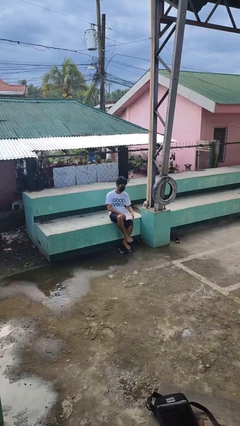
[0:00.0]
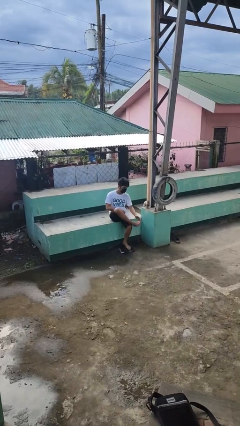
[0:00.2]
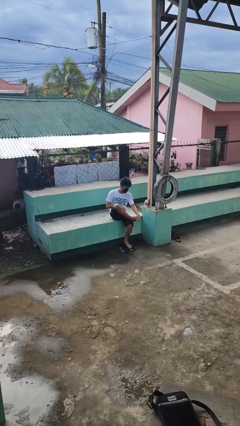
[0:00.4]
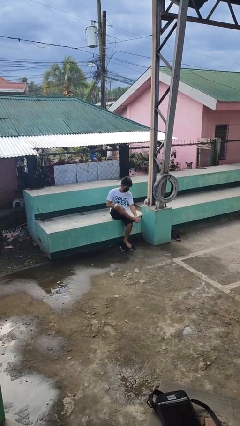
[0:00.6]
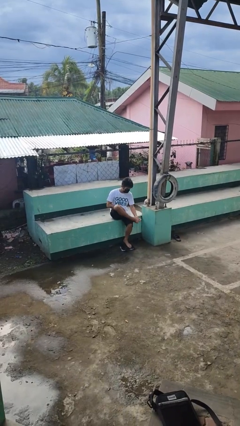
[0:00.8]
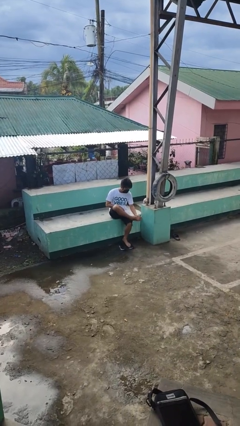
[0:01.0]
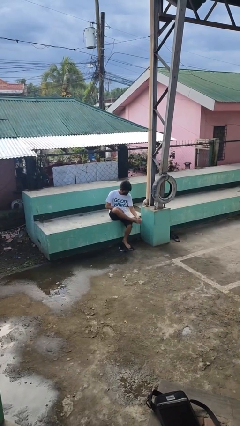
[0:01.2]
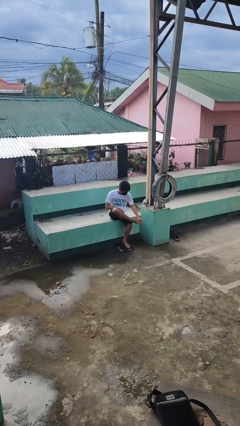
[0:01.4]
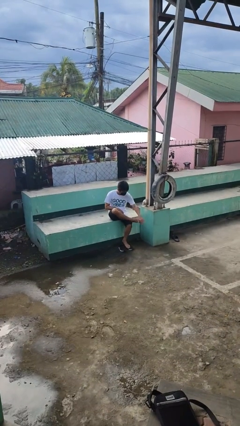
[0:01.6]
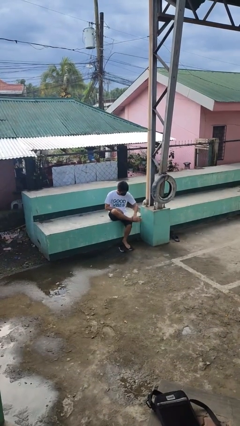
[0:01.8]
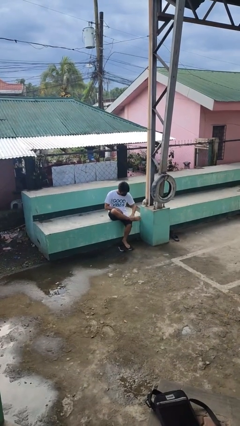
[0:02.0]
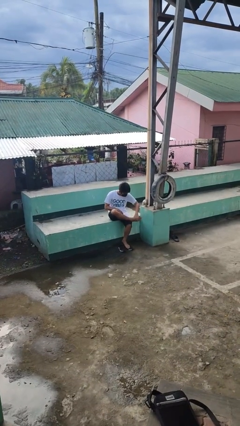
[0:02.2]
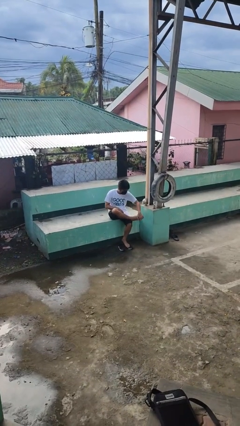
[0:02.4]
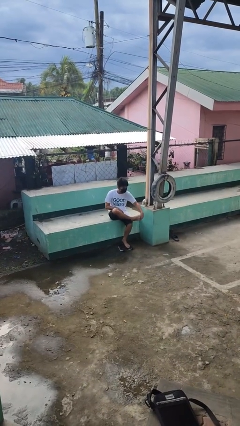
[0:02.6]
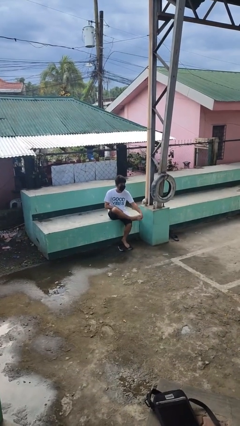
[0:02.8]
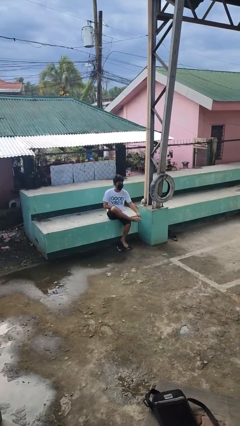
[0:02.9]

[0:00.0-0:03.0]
person rubs foot

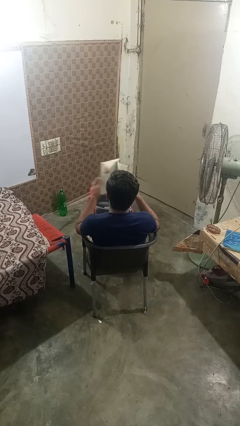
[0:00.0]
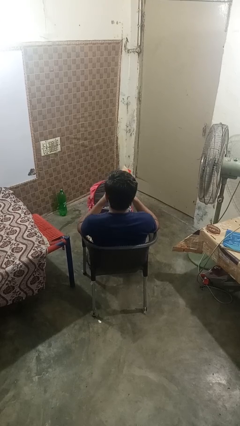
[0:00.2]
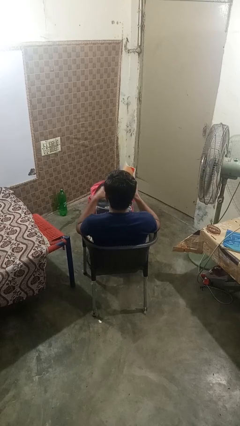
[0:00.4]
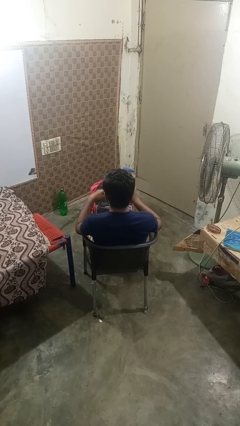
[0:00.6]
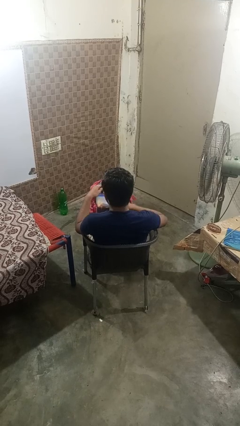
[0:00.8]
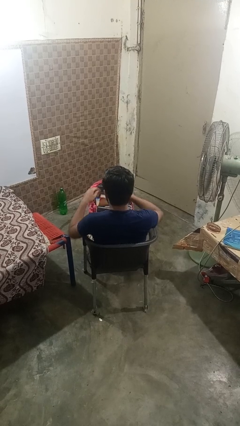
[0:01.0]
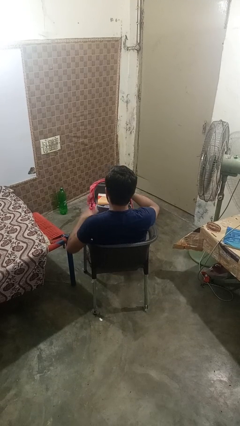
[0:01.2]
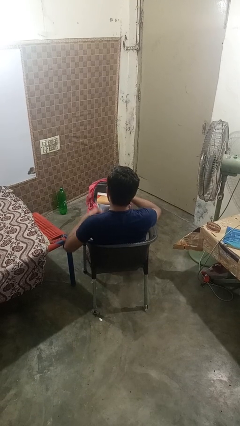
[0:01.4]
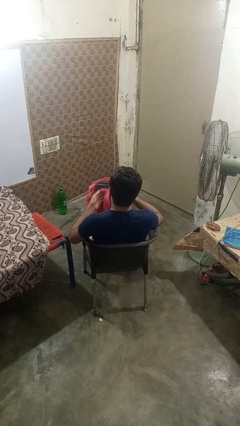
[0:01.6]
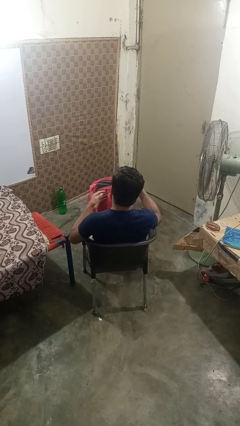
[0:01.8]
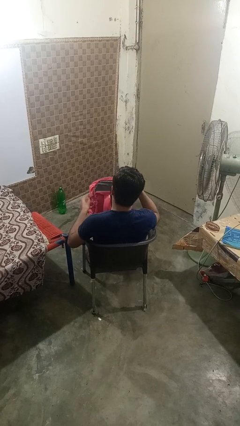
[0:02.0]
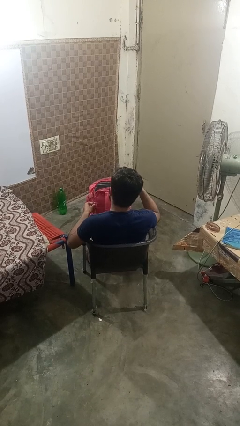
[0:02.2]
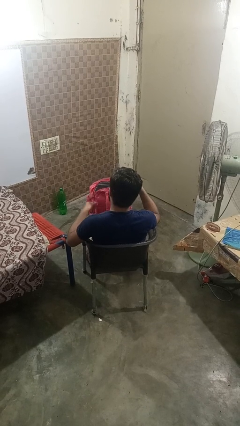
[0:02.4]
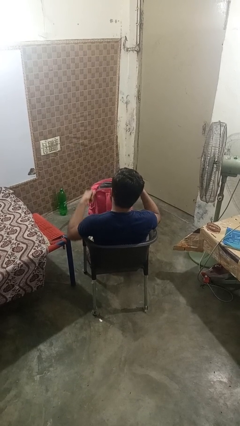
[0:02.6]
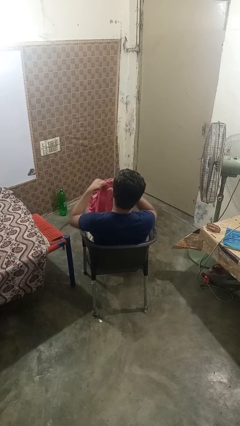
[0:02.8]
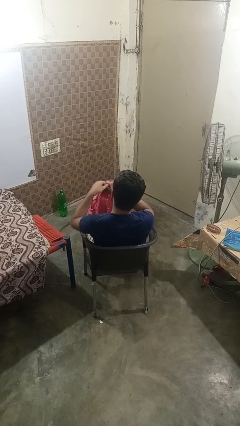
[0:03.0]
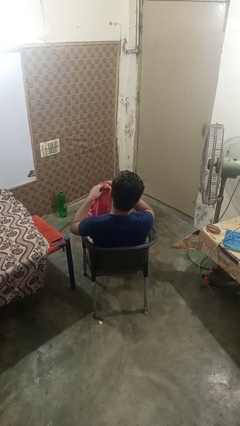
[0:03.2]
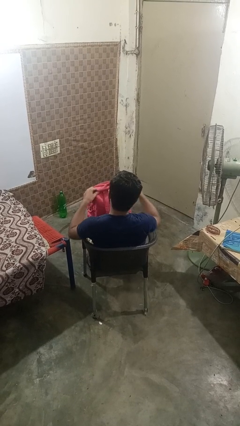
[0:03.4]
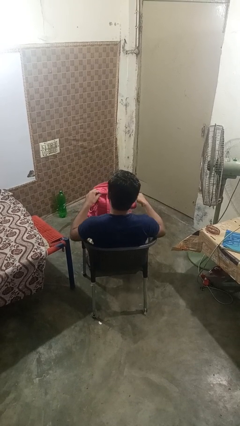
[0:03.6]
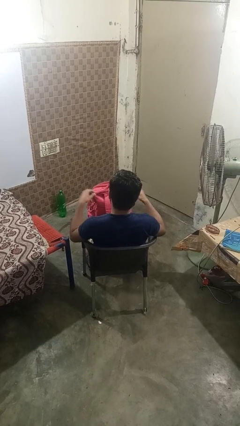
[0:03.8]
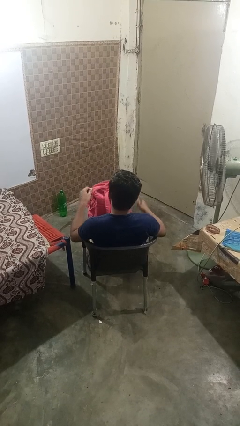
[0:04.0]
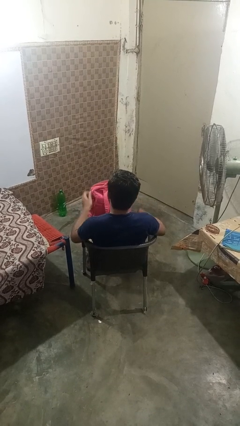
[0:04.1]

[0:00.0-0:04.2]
person puts object into backpack

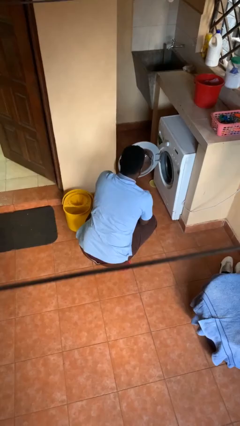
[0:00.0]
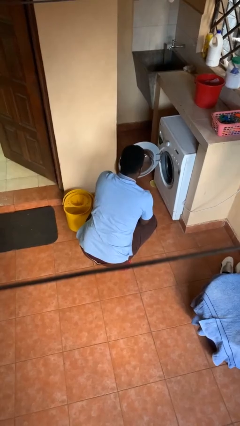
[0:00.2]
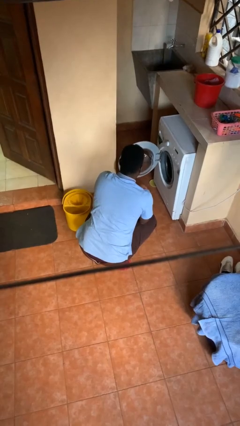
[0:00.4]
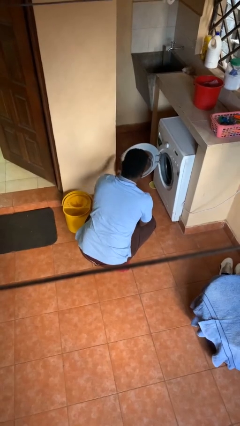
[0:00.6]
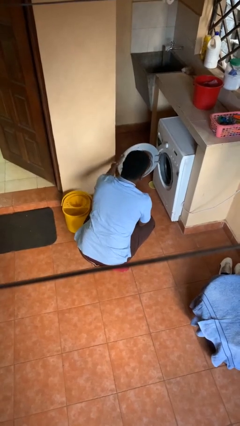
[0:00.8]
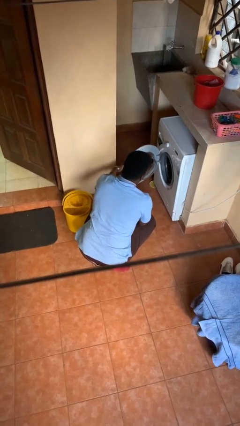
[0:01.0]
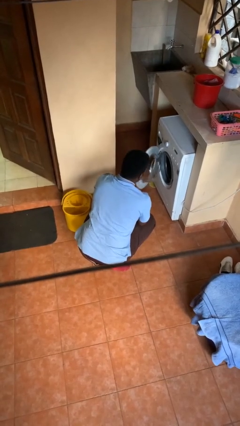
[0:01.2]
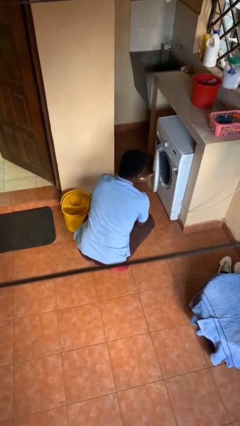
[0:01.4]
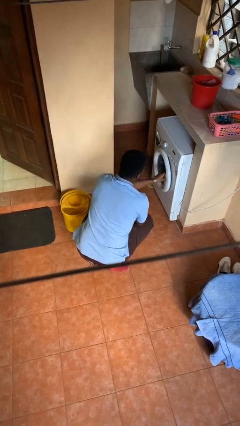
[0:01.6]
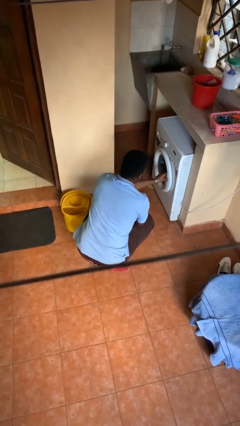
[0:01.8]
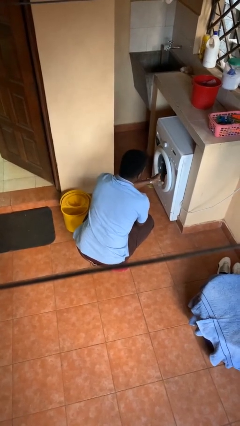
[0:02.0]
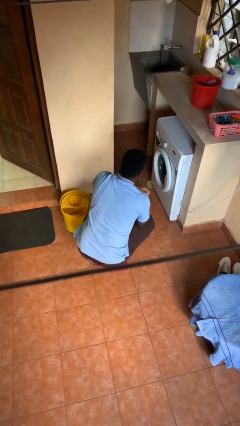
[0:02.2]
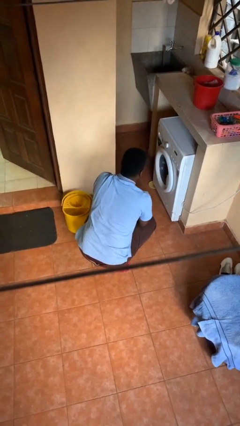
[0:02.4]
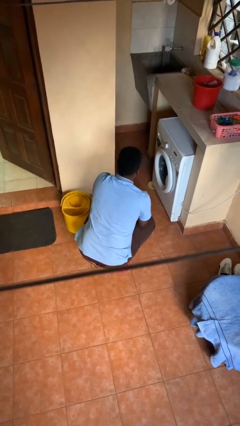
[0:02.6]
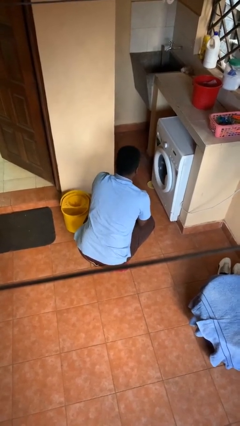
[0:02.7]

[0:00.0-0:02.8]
person closes clothes washer

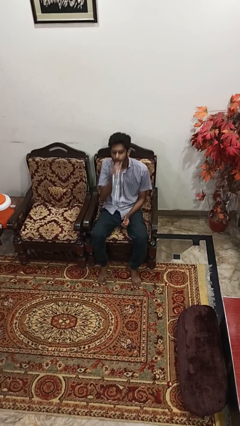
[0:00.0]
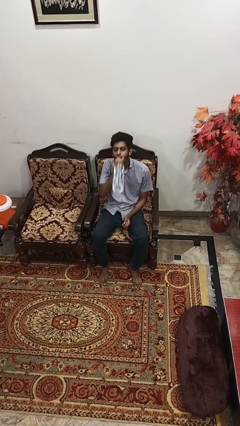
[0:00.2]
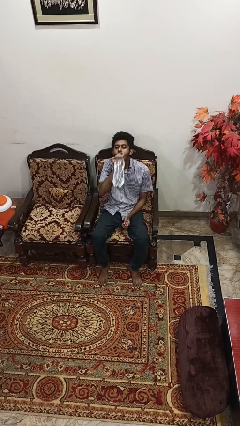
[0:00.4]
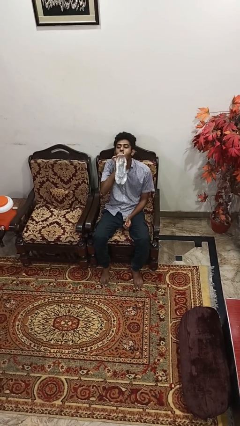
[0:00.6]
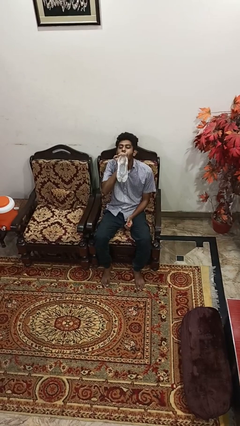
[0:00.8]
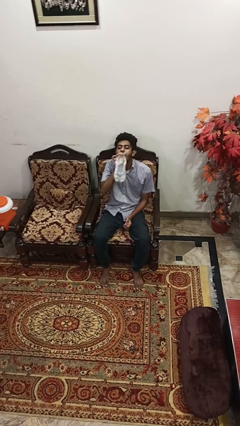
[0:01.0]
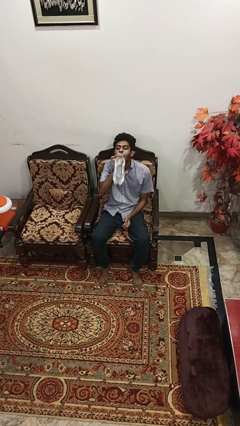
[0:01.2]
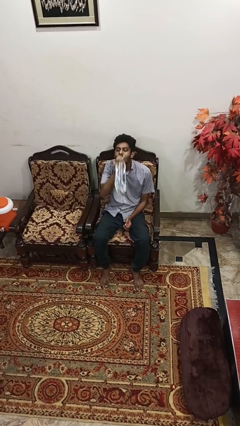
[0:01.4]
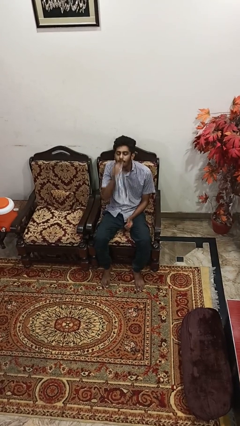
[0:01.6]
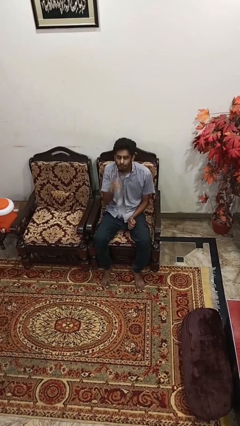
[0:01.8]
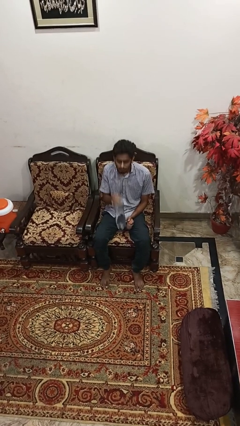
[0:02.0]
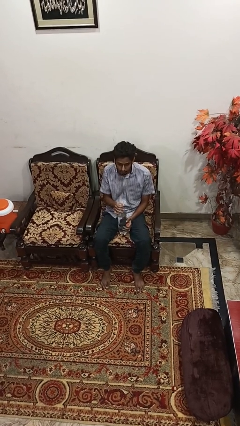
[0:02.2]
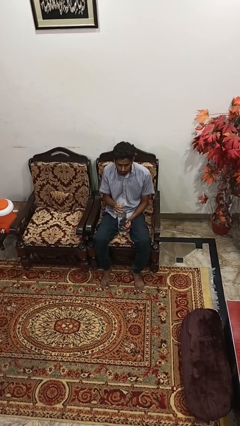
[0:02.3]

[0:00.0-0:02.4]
person drinks from bottle

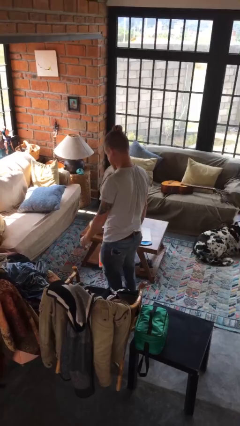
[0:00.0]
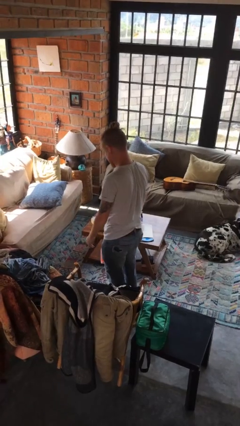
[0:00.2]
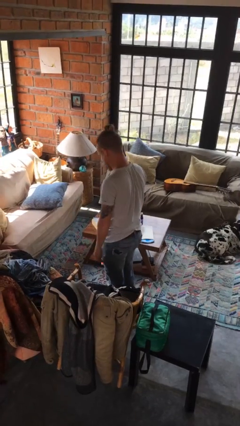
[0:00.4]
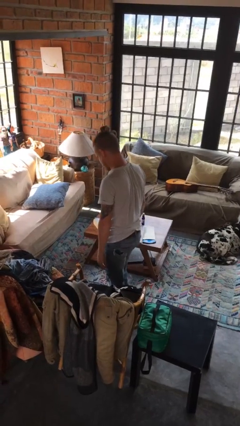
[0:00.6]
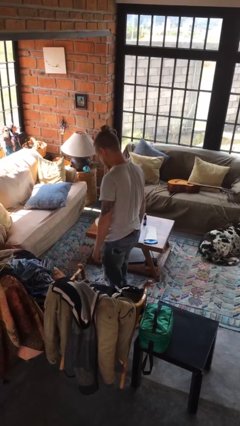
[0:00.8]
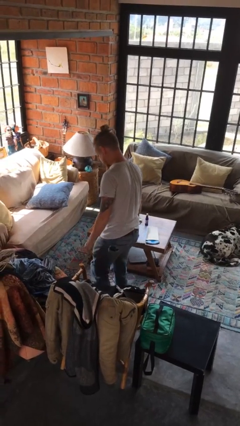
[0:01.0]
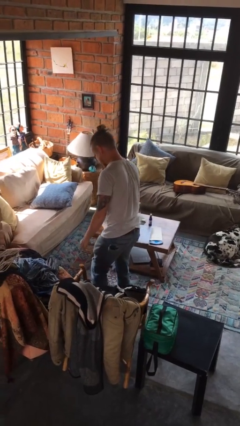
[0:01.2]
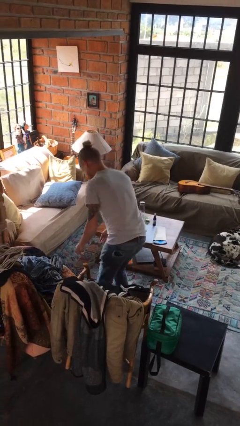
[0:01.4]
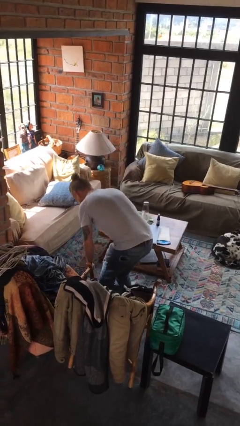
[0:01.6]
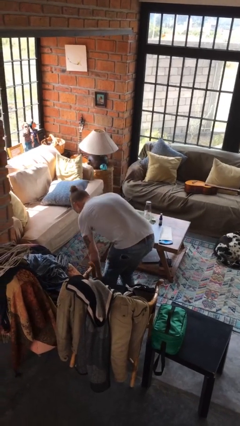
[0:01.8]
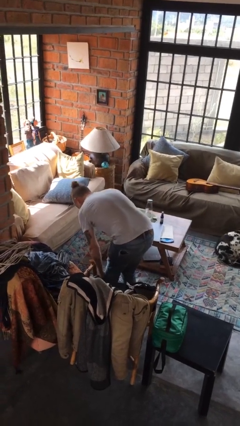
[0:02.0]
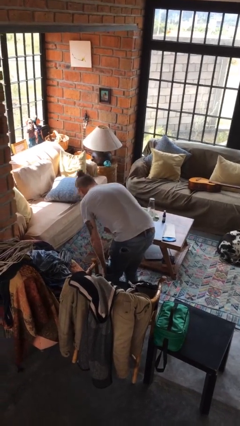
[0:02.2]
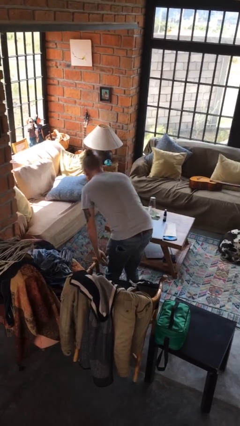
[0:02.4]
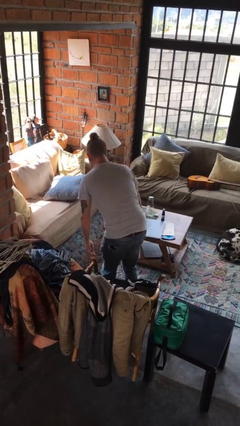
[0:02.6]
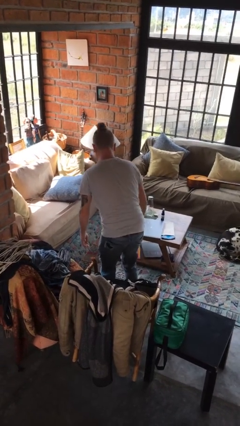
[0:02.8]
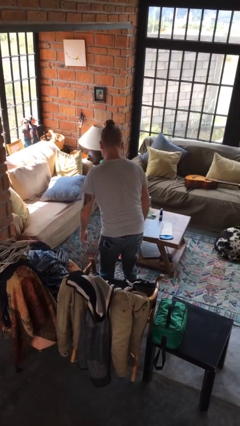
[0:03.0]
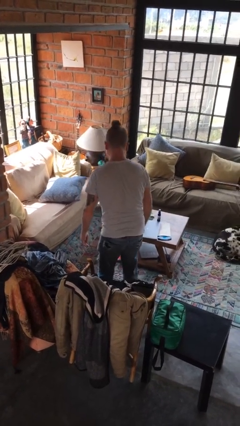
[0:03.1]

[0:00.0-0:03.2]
person stubs toe

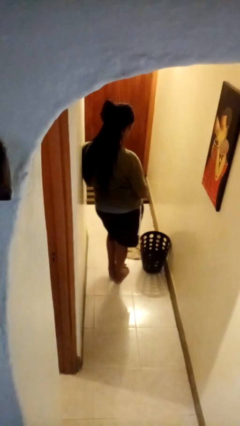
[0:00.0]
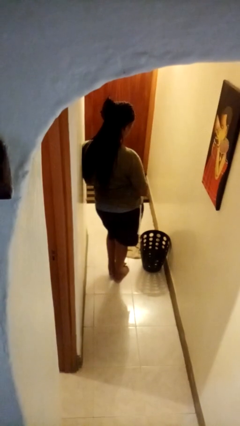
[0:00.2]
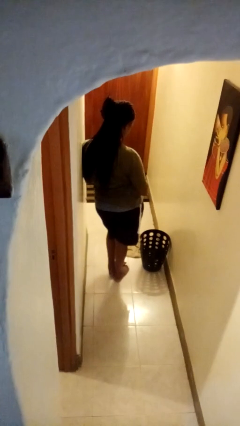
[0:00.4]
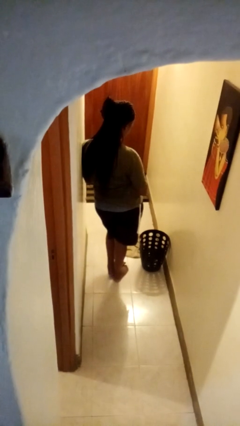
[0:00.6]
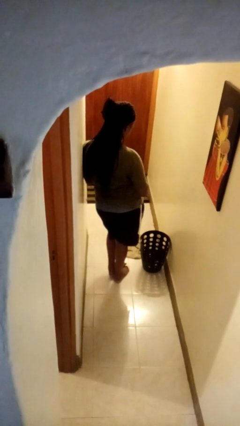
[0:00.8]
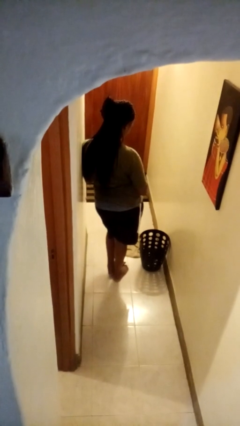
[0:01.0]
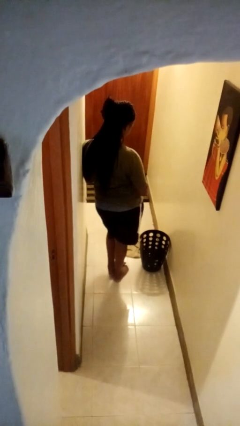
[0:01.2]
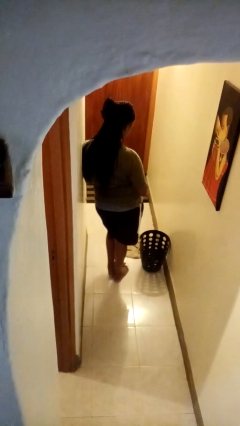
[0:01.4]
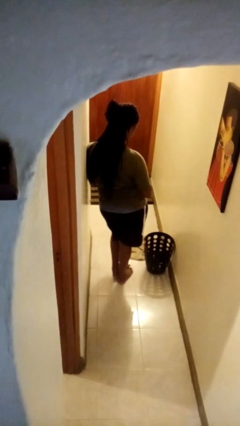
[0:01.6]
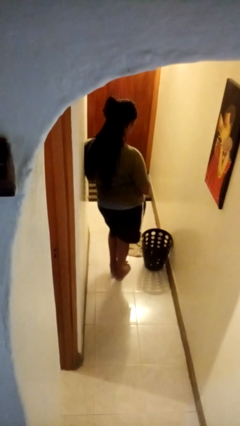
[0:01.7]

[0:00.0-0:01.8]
person discards trash
